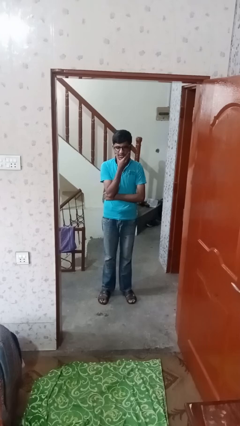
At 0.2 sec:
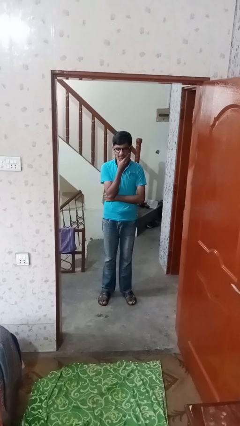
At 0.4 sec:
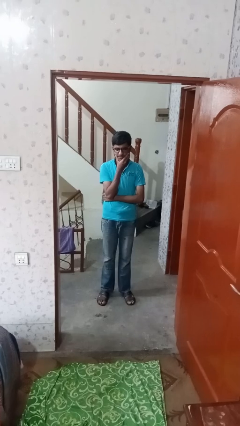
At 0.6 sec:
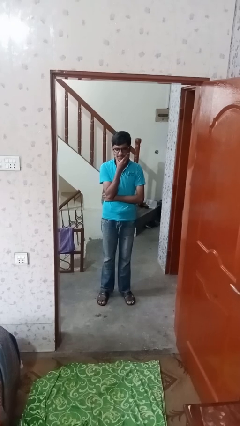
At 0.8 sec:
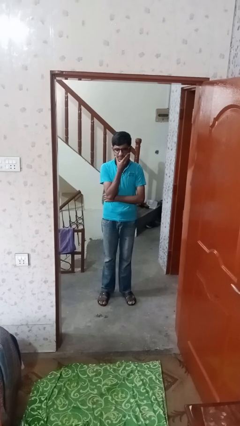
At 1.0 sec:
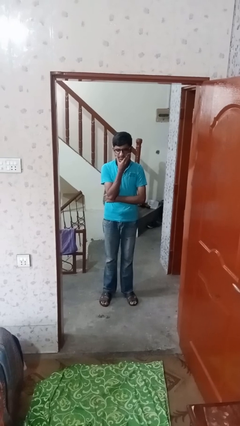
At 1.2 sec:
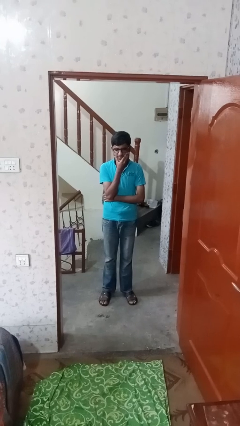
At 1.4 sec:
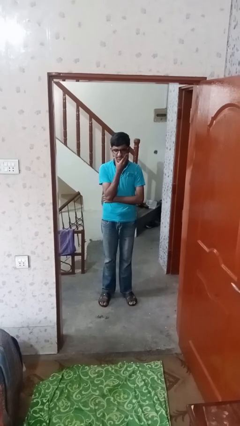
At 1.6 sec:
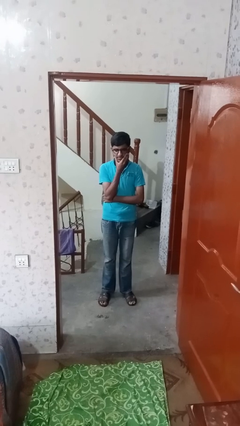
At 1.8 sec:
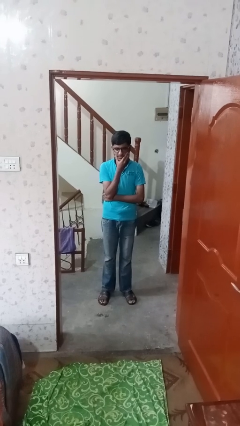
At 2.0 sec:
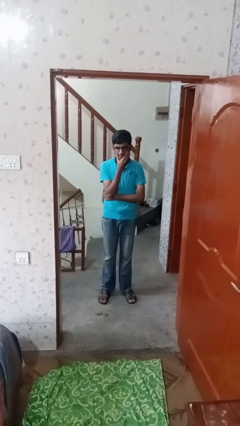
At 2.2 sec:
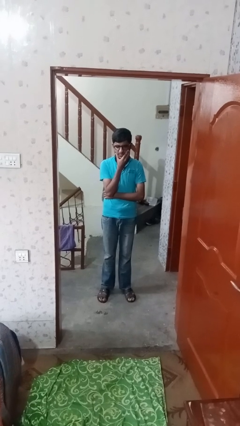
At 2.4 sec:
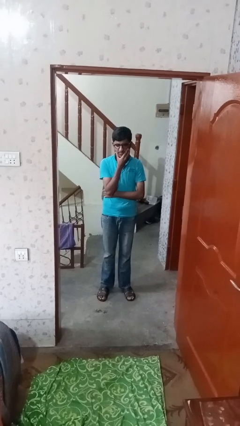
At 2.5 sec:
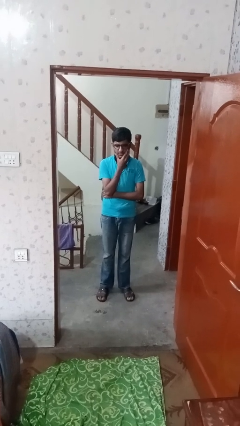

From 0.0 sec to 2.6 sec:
person strokes chin

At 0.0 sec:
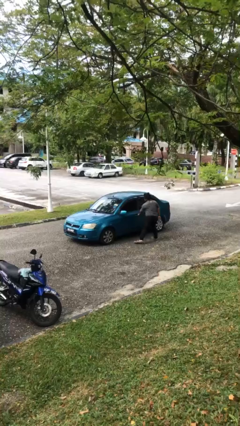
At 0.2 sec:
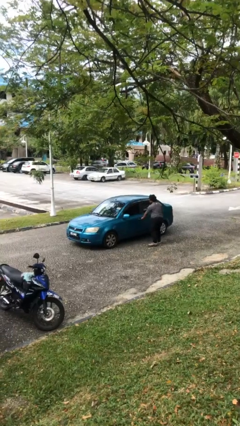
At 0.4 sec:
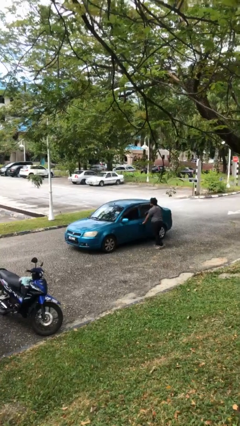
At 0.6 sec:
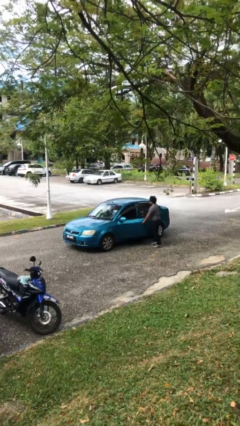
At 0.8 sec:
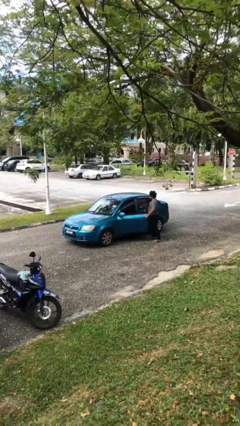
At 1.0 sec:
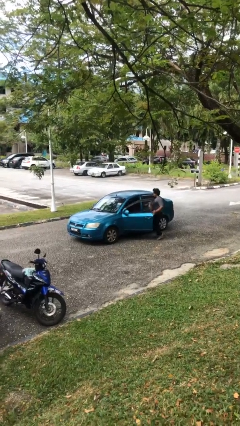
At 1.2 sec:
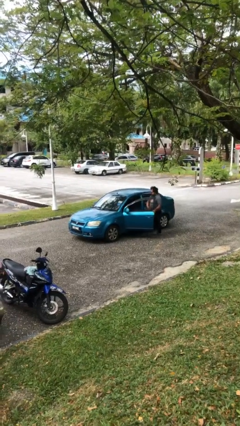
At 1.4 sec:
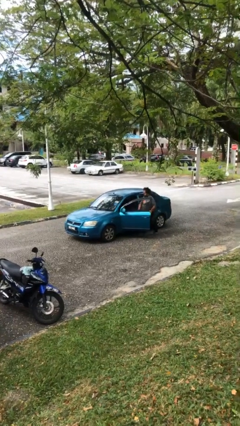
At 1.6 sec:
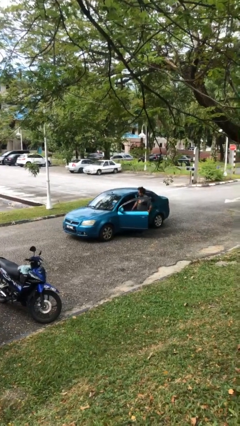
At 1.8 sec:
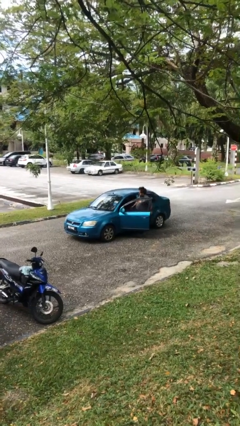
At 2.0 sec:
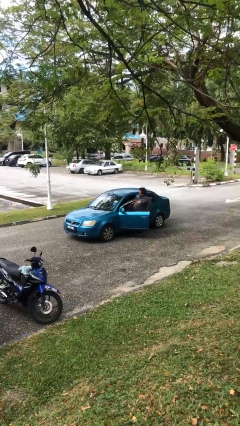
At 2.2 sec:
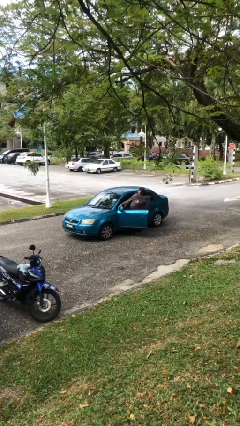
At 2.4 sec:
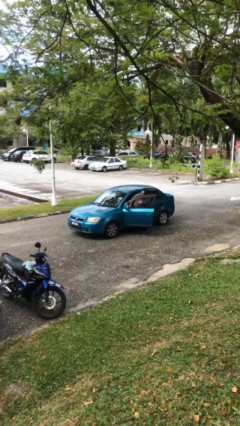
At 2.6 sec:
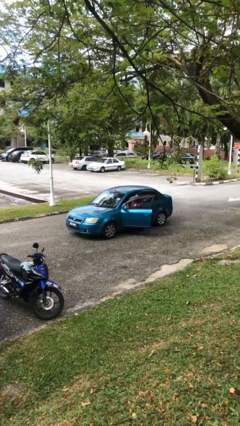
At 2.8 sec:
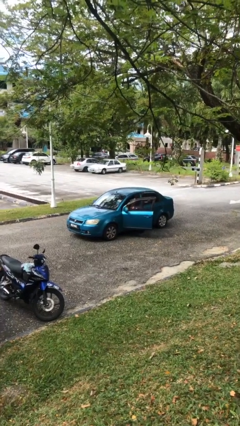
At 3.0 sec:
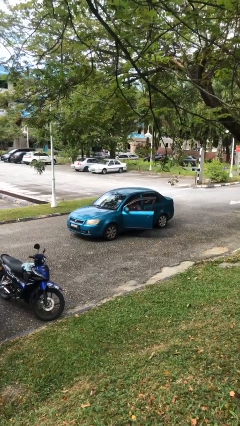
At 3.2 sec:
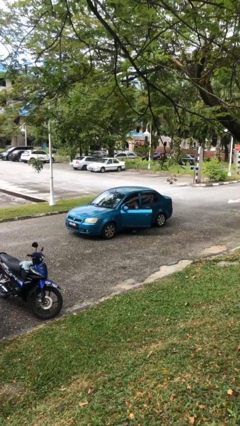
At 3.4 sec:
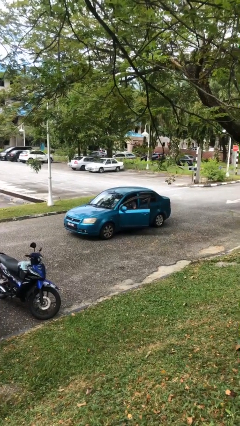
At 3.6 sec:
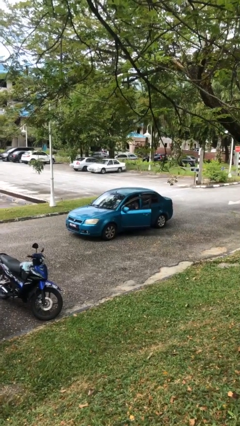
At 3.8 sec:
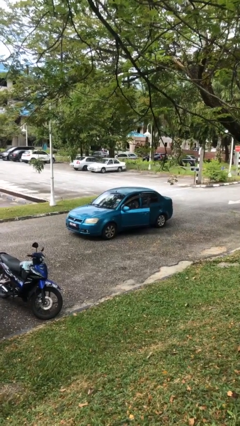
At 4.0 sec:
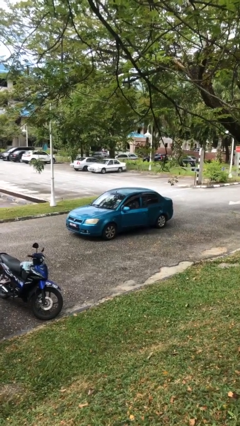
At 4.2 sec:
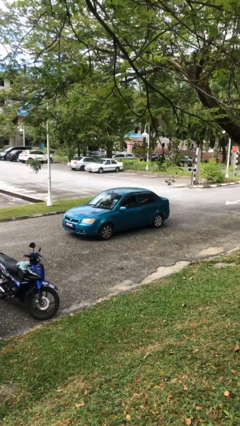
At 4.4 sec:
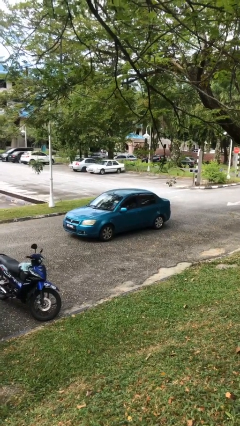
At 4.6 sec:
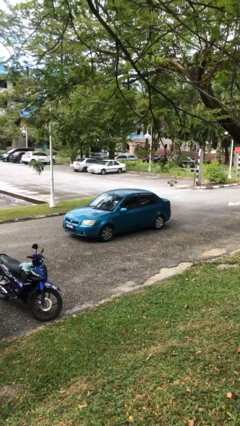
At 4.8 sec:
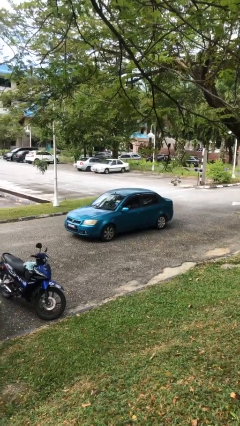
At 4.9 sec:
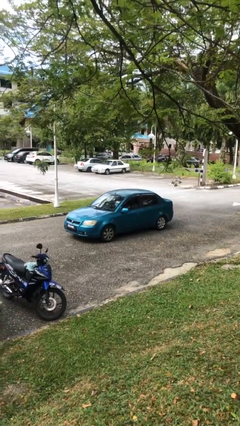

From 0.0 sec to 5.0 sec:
car picks up person

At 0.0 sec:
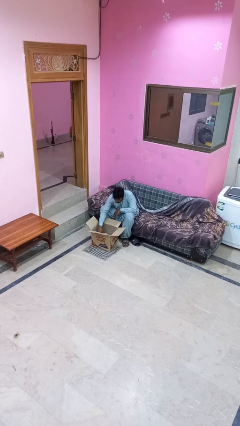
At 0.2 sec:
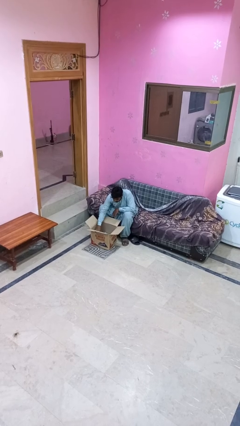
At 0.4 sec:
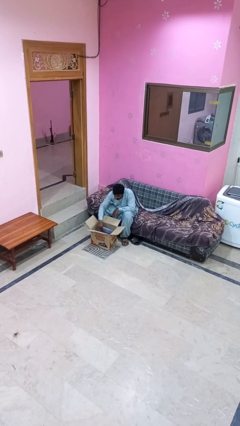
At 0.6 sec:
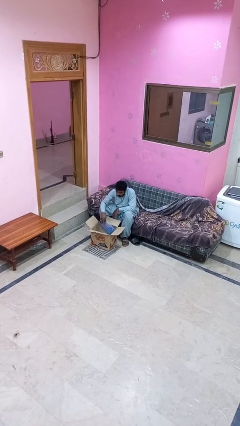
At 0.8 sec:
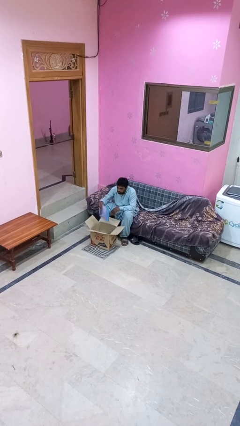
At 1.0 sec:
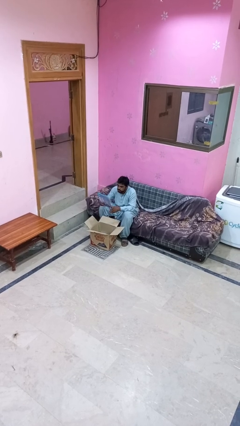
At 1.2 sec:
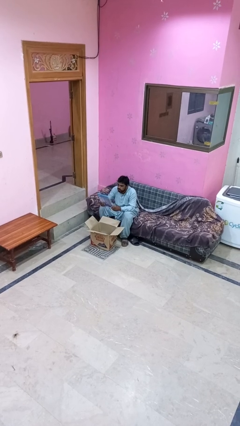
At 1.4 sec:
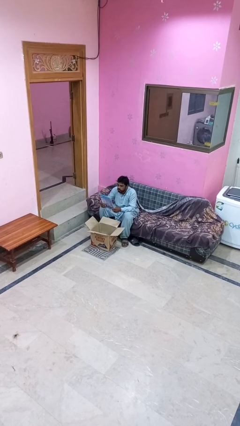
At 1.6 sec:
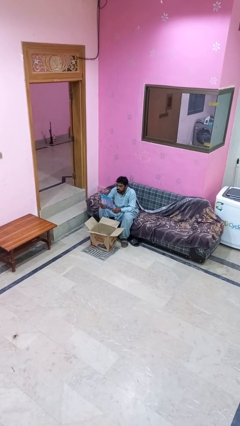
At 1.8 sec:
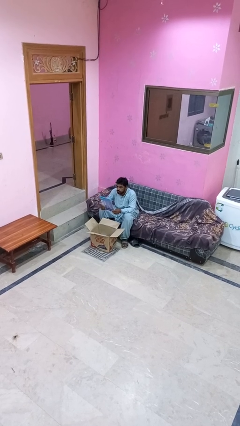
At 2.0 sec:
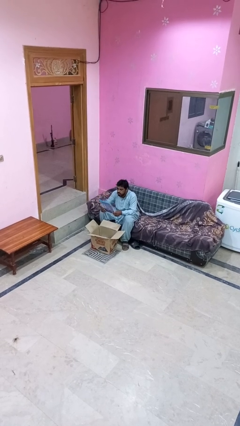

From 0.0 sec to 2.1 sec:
person takes object from box

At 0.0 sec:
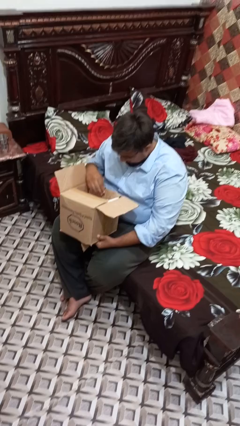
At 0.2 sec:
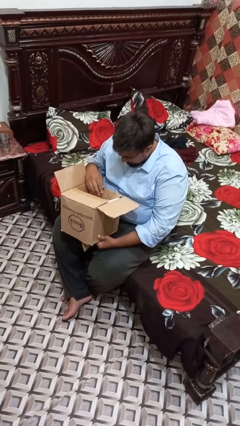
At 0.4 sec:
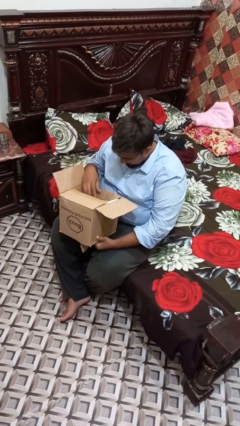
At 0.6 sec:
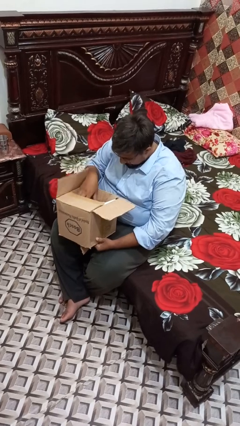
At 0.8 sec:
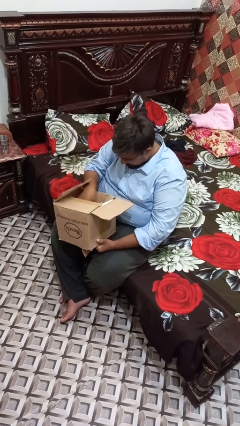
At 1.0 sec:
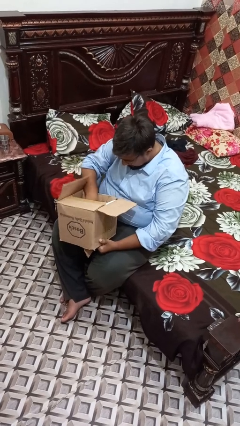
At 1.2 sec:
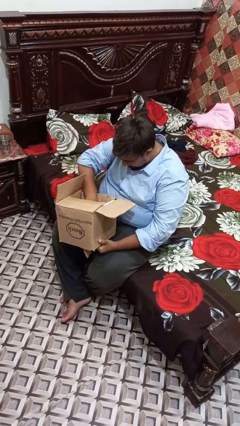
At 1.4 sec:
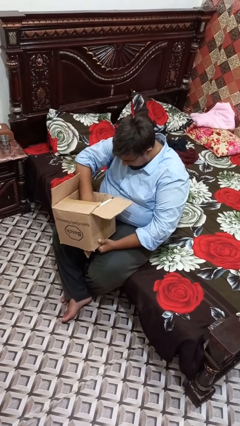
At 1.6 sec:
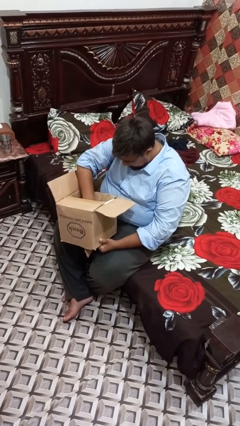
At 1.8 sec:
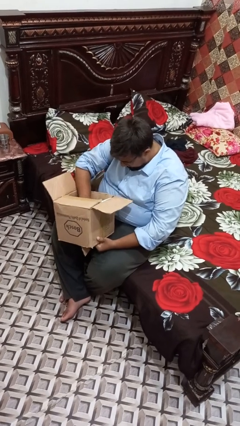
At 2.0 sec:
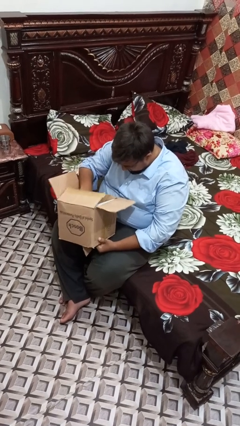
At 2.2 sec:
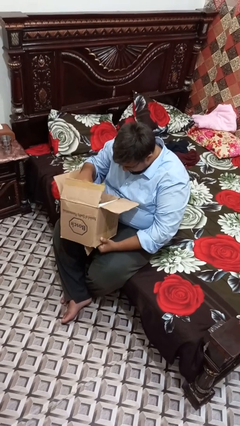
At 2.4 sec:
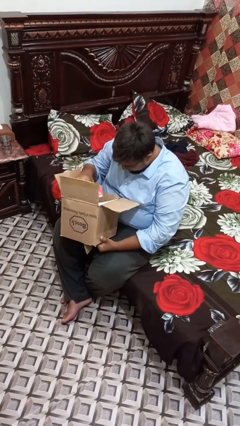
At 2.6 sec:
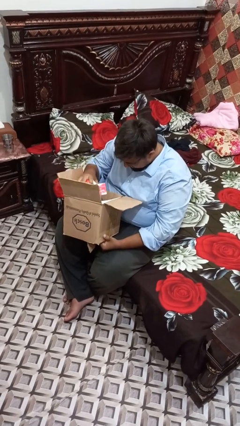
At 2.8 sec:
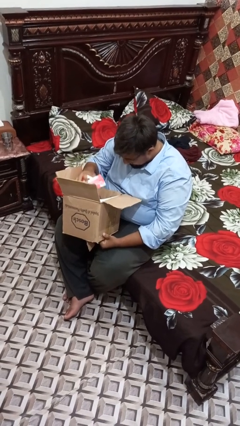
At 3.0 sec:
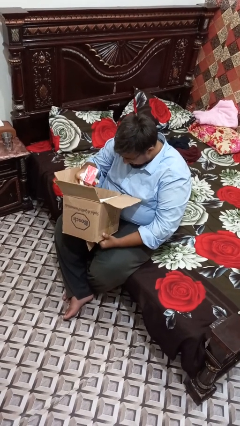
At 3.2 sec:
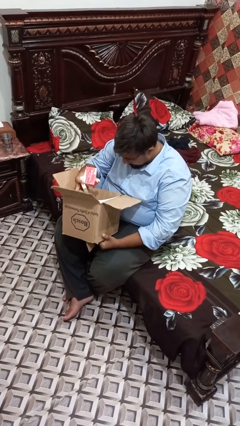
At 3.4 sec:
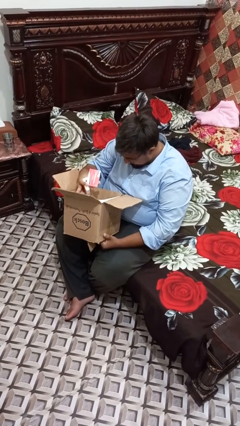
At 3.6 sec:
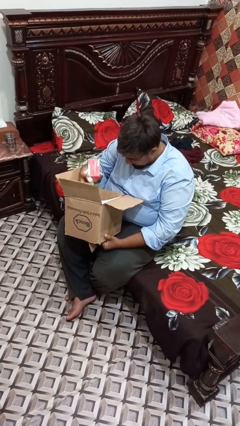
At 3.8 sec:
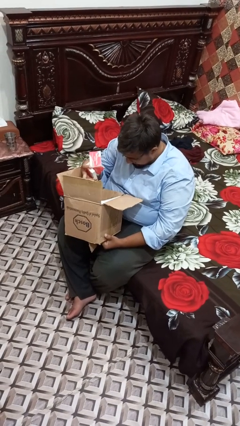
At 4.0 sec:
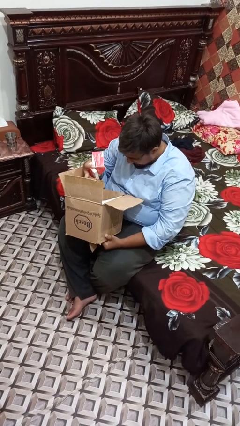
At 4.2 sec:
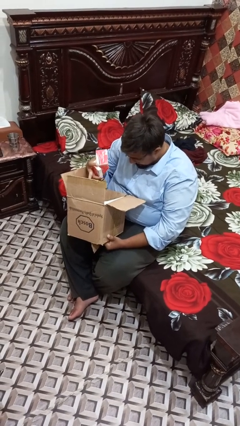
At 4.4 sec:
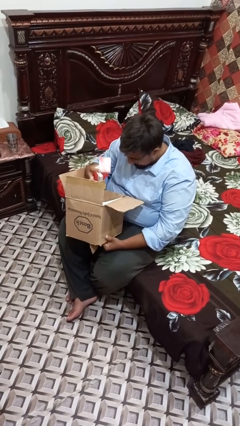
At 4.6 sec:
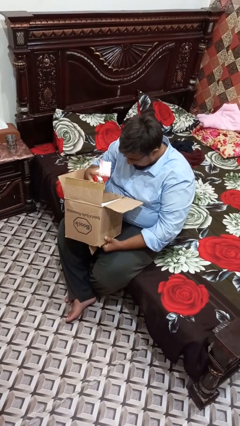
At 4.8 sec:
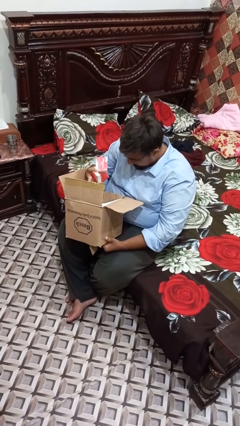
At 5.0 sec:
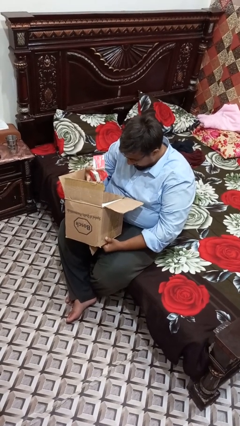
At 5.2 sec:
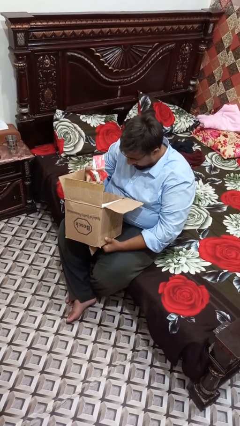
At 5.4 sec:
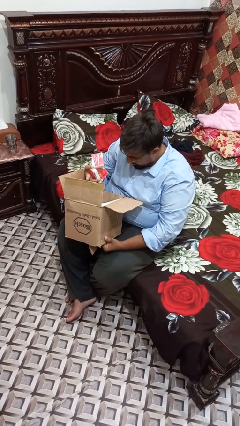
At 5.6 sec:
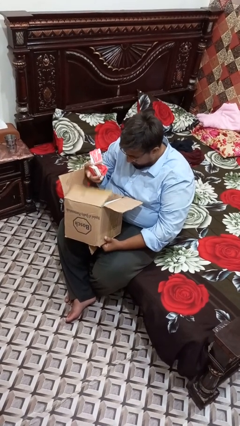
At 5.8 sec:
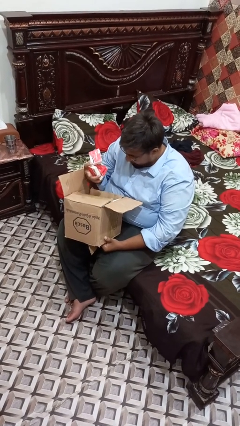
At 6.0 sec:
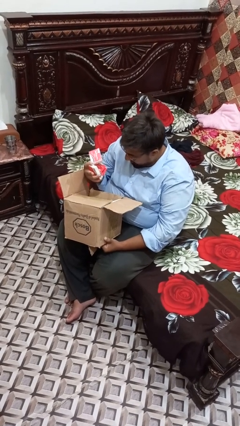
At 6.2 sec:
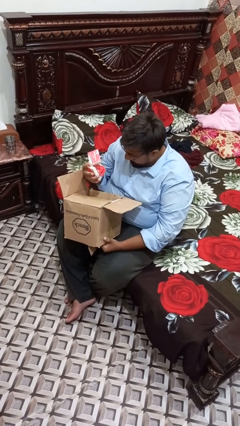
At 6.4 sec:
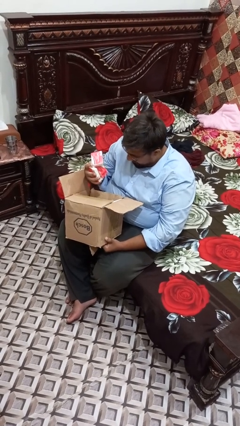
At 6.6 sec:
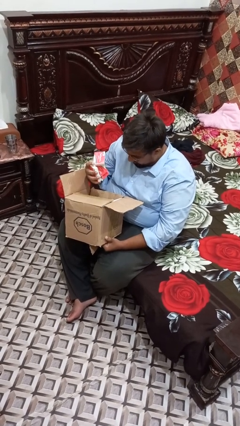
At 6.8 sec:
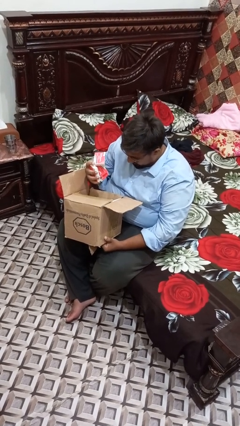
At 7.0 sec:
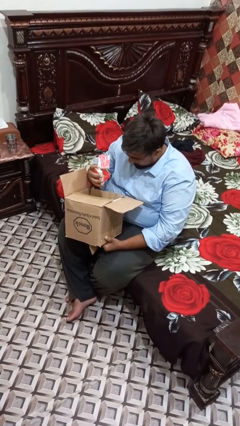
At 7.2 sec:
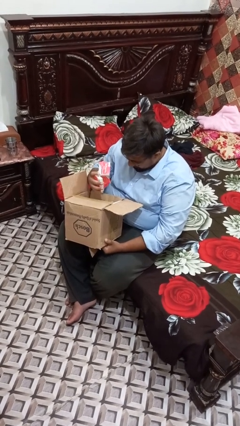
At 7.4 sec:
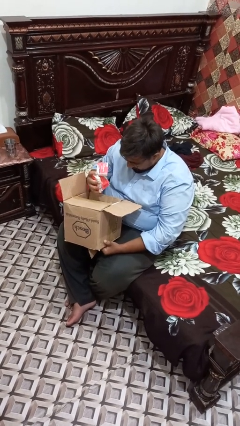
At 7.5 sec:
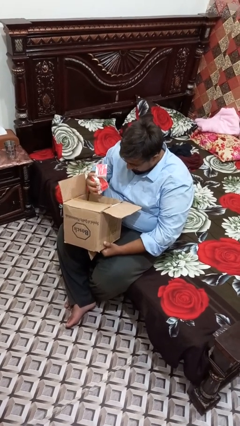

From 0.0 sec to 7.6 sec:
person searches in box

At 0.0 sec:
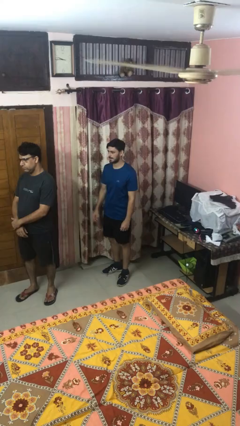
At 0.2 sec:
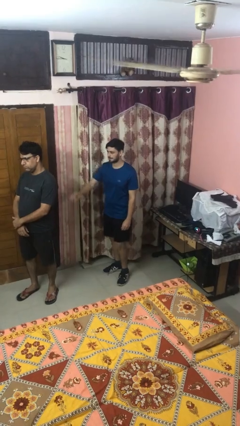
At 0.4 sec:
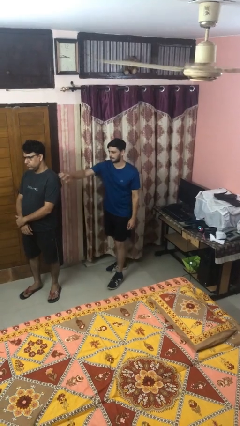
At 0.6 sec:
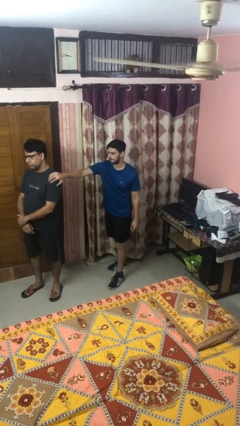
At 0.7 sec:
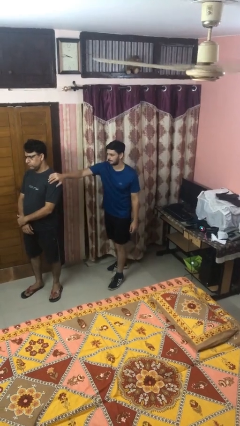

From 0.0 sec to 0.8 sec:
person grabs person by shoulder
